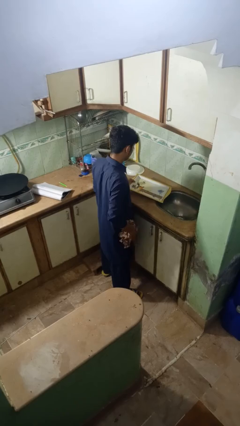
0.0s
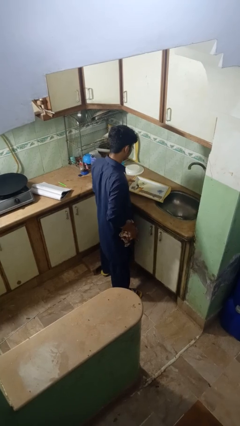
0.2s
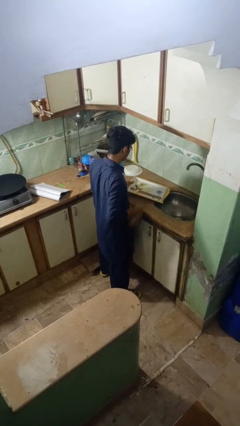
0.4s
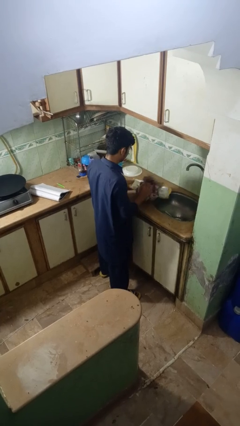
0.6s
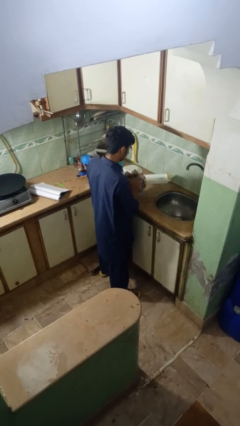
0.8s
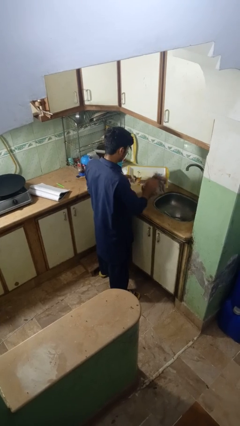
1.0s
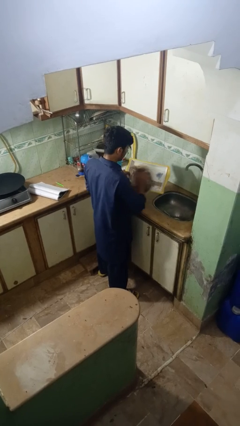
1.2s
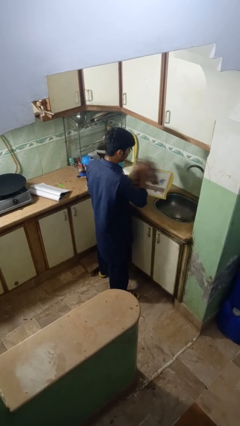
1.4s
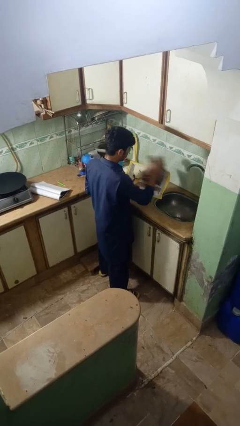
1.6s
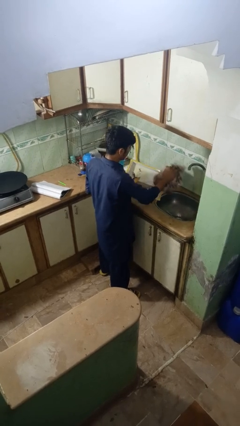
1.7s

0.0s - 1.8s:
person dries dish

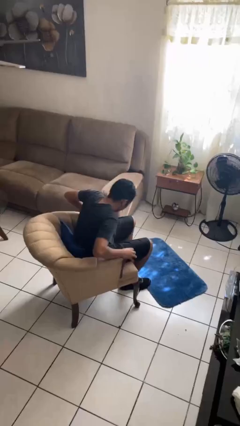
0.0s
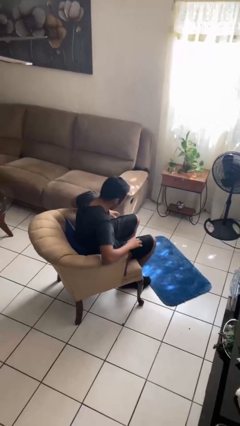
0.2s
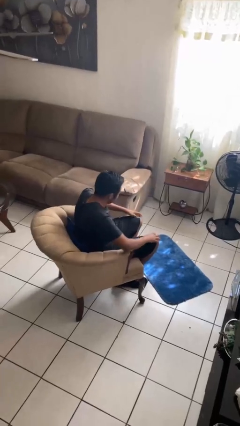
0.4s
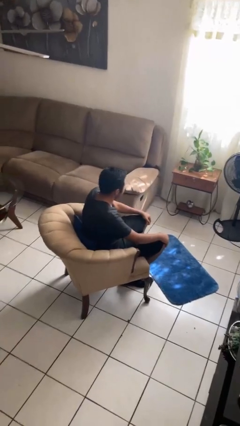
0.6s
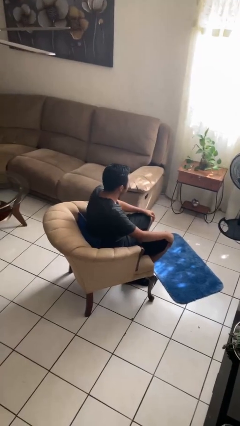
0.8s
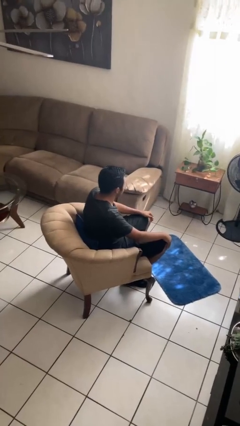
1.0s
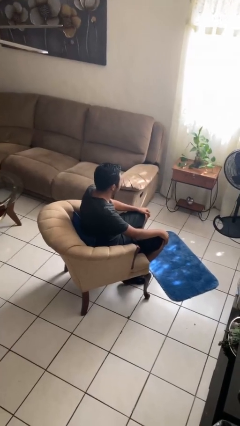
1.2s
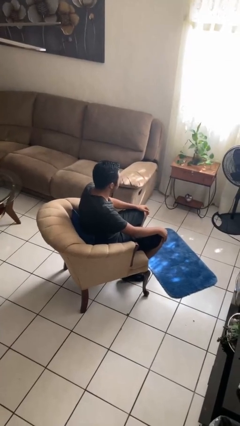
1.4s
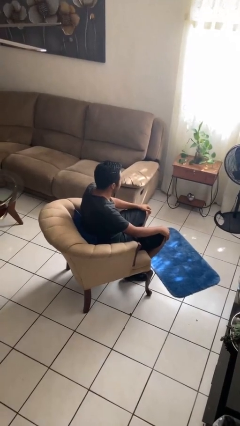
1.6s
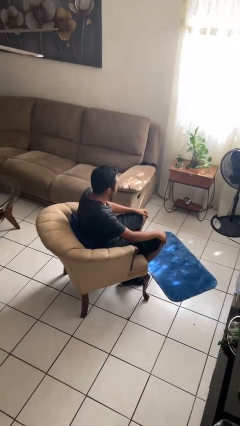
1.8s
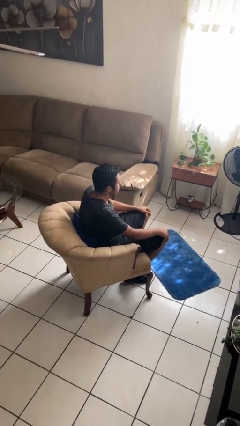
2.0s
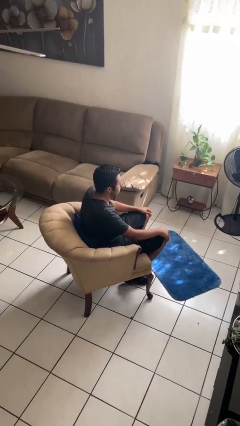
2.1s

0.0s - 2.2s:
person sits down

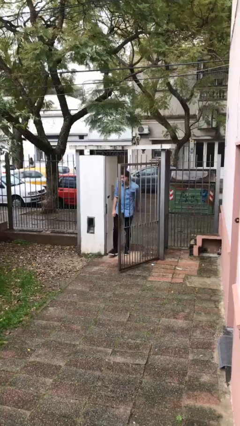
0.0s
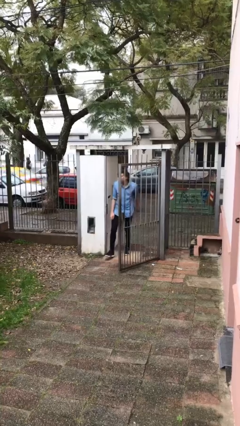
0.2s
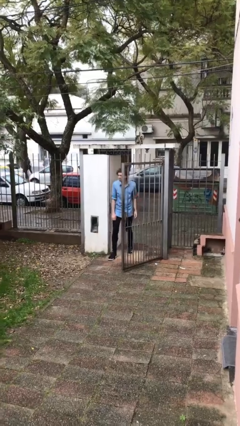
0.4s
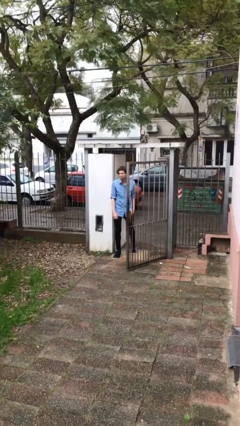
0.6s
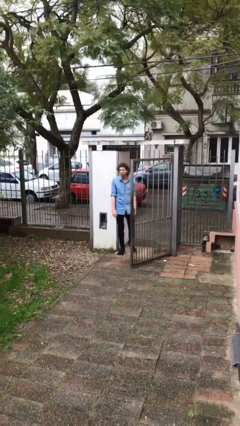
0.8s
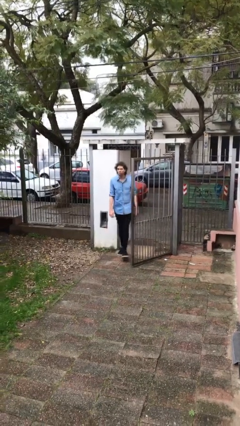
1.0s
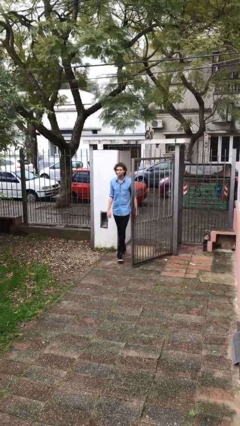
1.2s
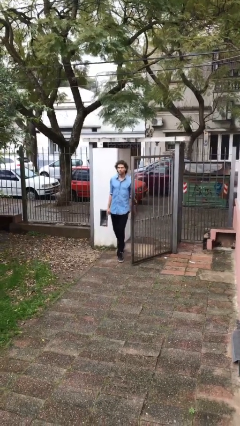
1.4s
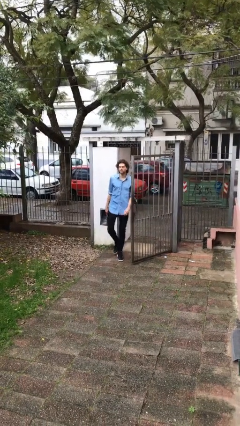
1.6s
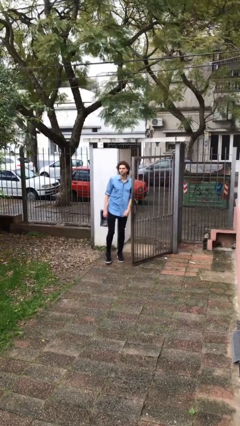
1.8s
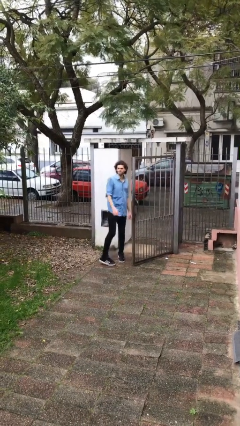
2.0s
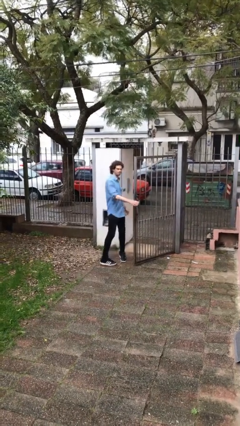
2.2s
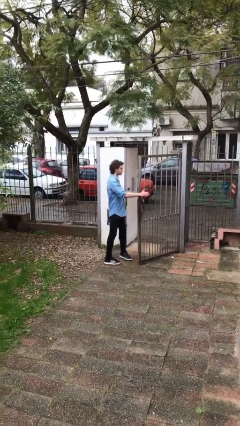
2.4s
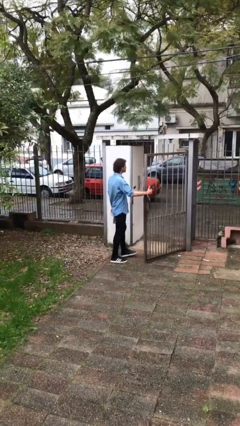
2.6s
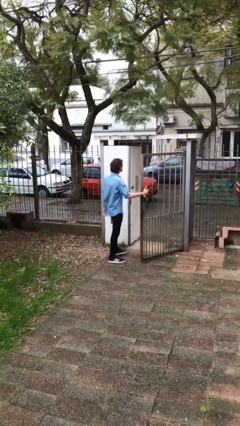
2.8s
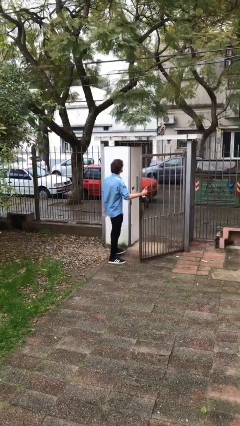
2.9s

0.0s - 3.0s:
person enters scene through structure

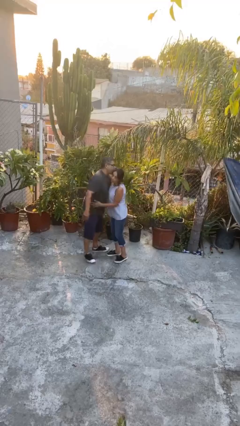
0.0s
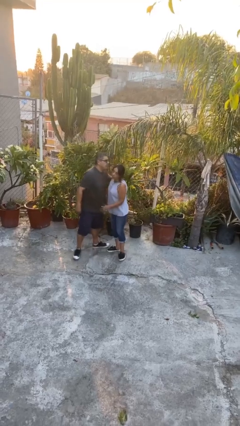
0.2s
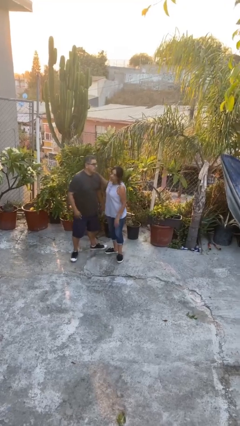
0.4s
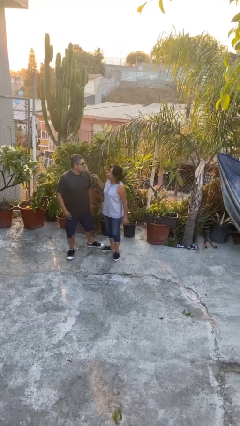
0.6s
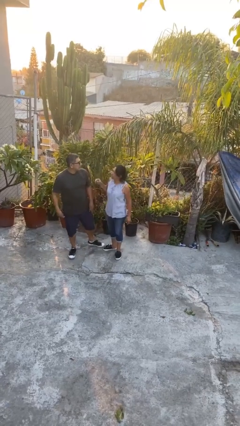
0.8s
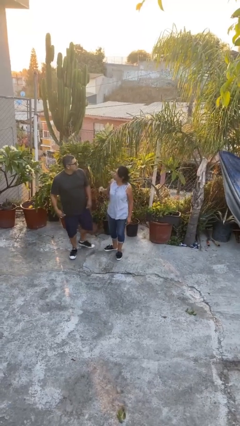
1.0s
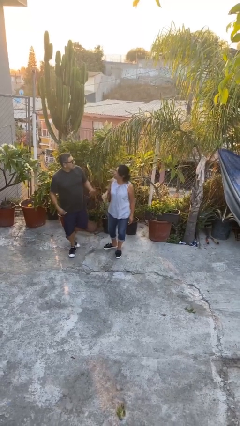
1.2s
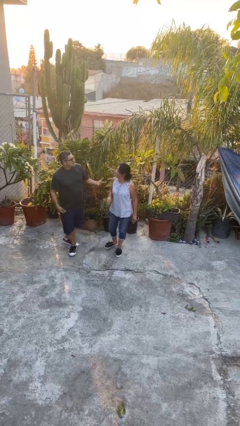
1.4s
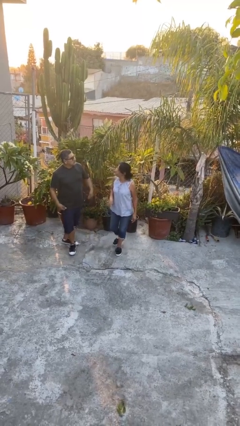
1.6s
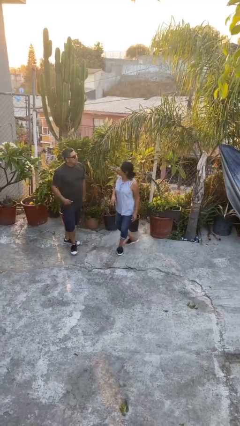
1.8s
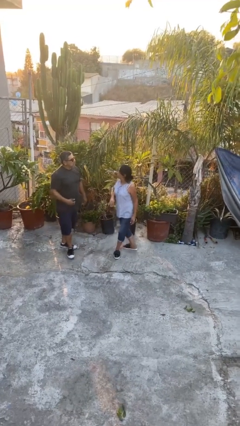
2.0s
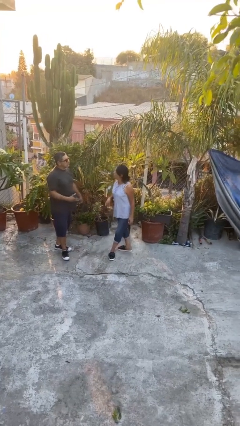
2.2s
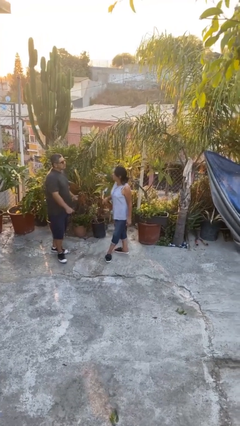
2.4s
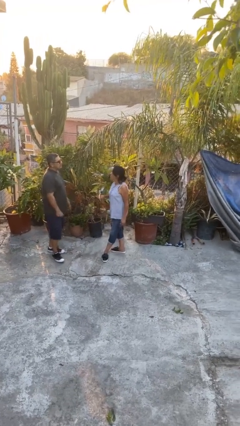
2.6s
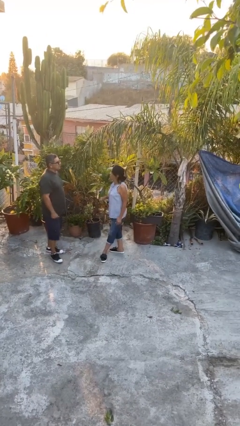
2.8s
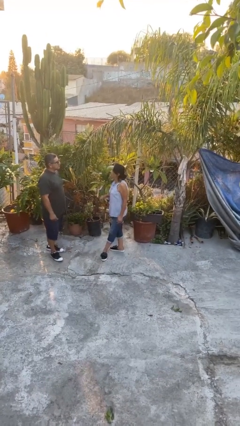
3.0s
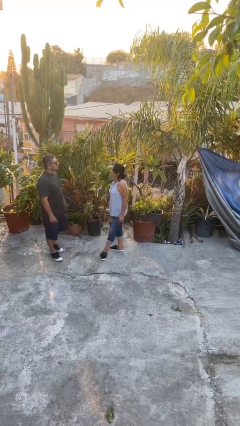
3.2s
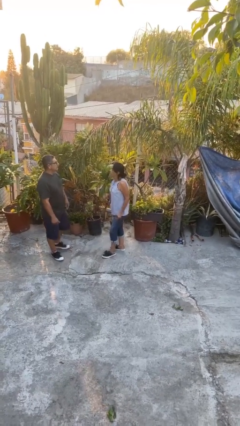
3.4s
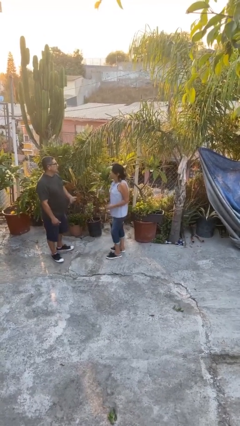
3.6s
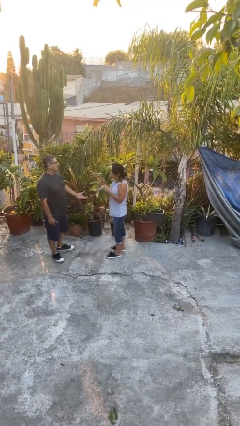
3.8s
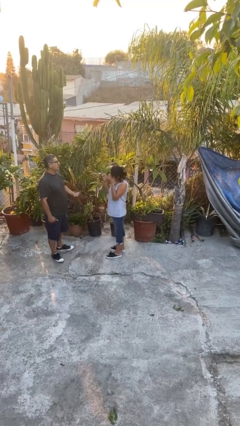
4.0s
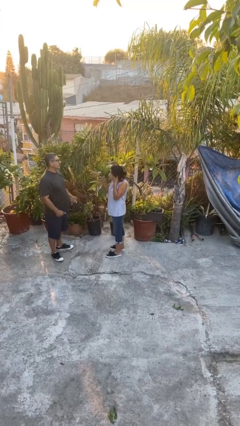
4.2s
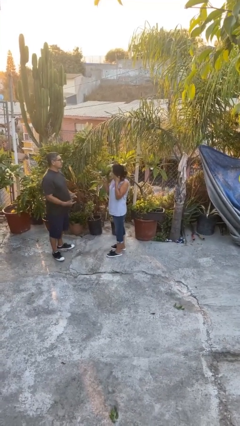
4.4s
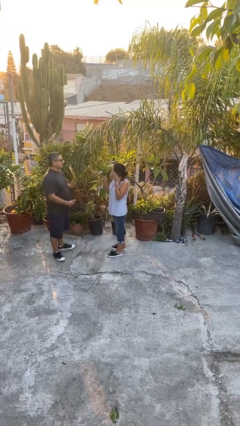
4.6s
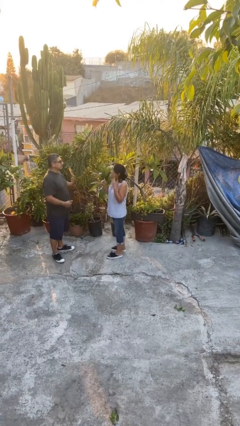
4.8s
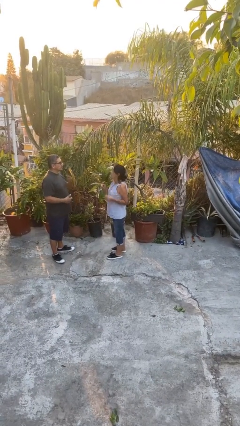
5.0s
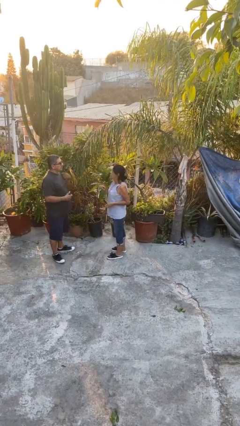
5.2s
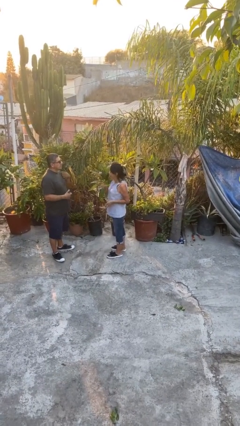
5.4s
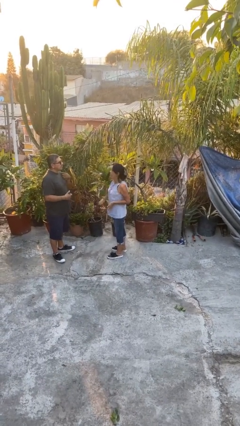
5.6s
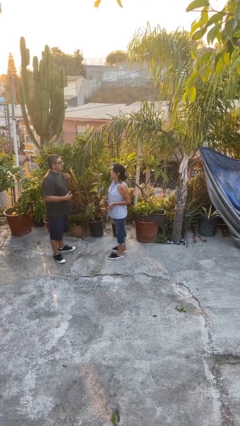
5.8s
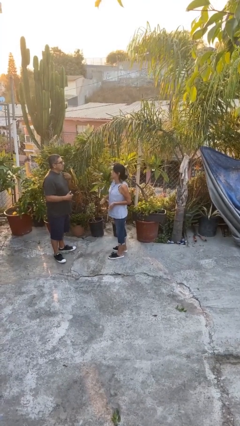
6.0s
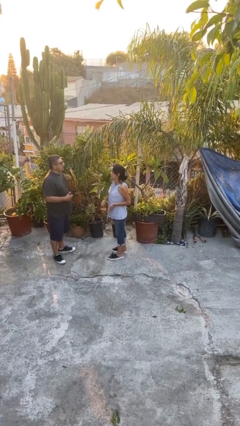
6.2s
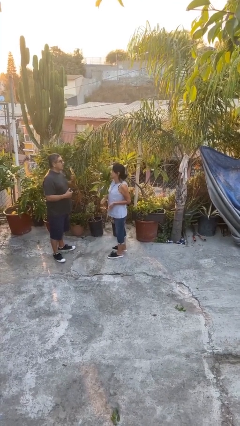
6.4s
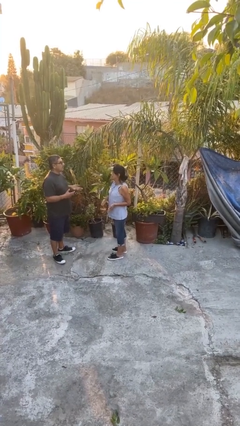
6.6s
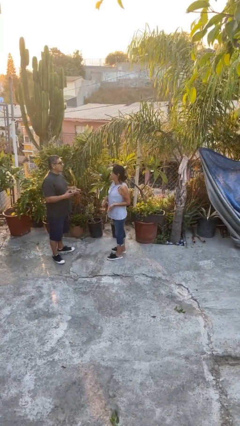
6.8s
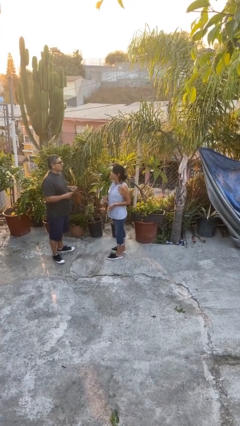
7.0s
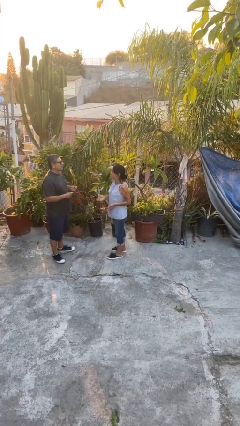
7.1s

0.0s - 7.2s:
person talks to person

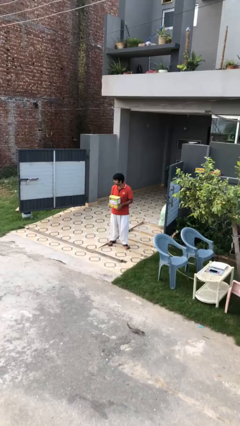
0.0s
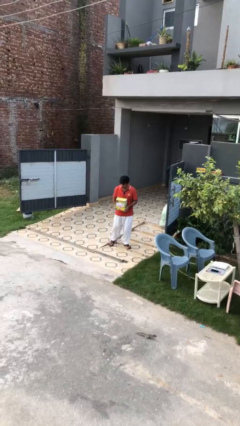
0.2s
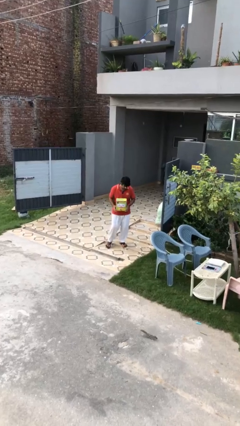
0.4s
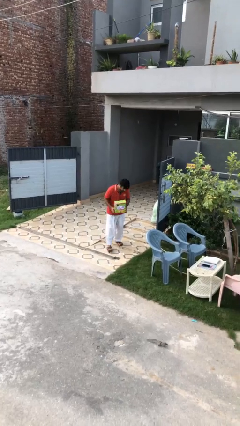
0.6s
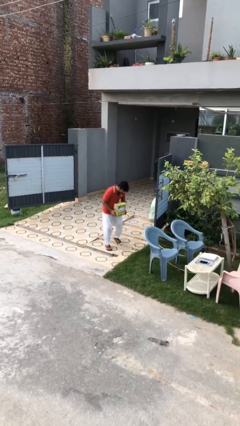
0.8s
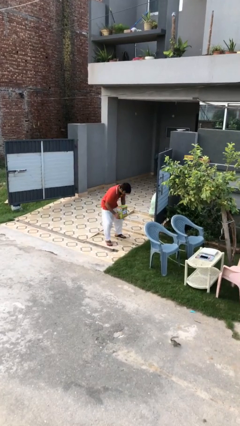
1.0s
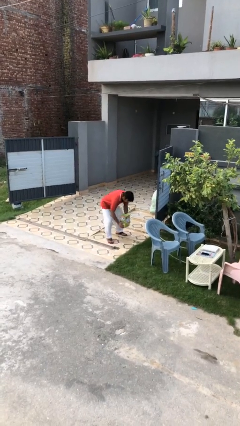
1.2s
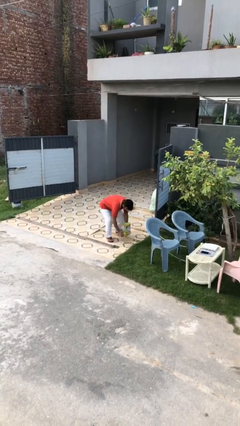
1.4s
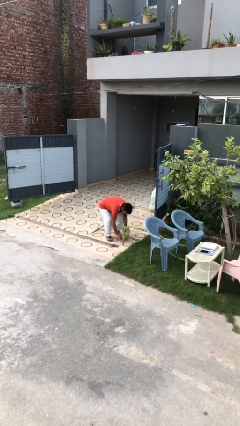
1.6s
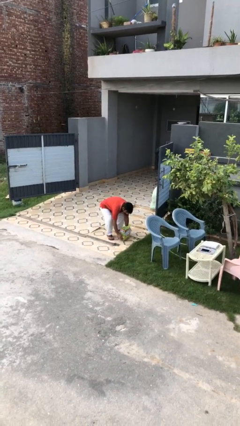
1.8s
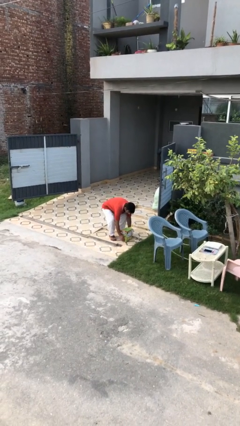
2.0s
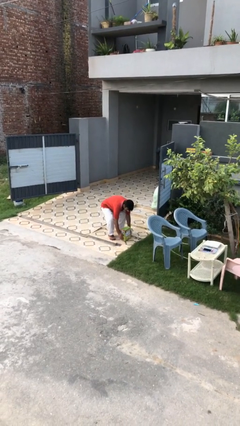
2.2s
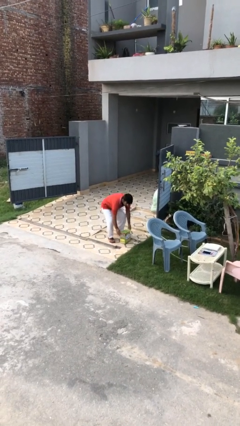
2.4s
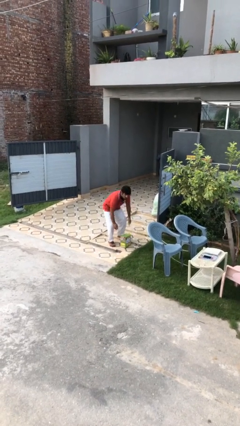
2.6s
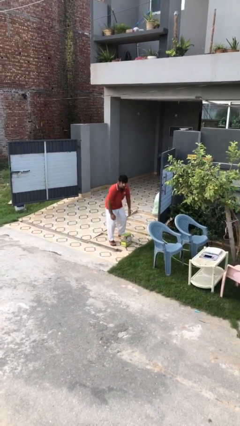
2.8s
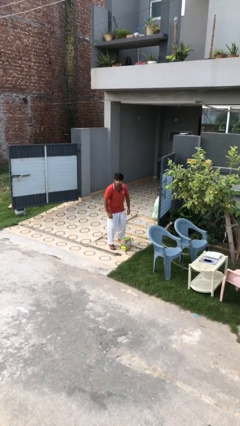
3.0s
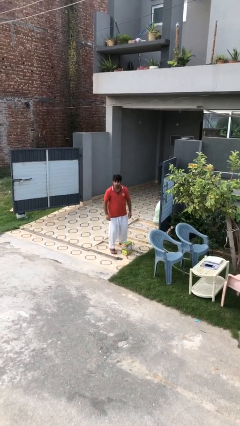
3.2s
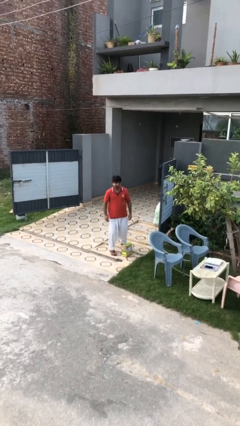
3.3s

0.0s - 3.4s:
person puts down object on floor
